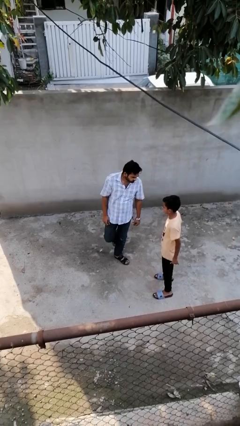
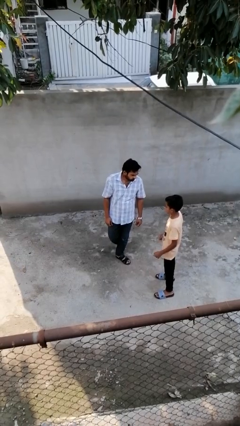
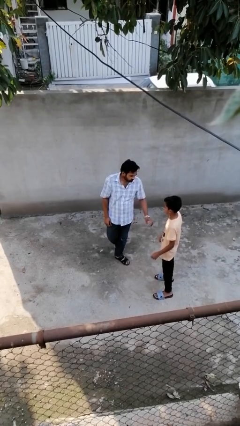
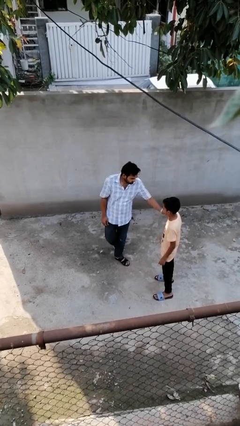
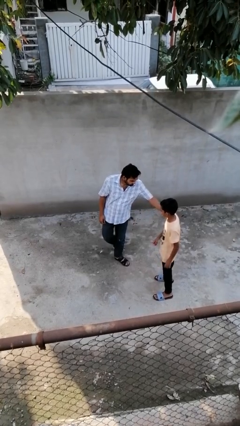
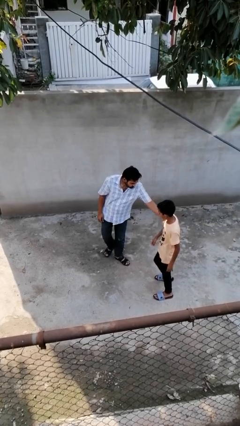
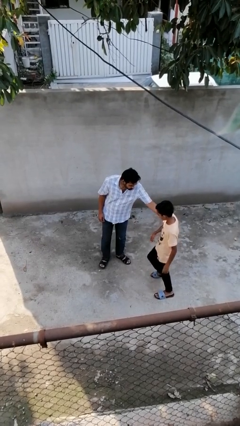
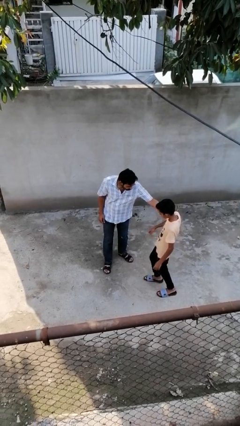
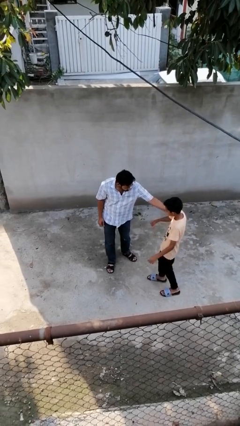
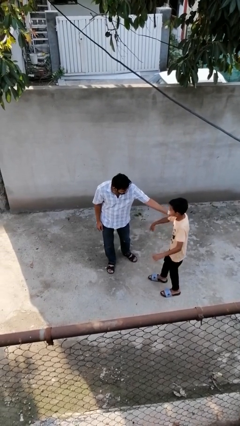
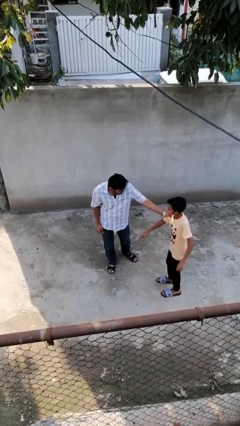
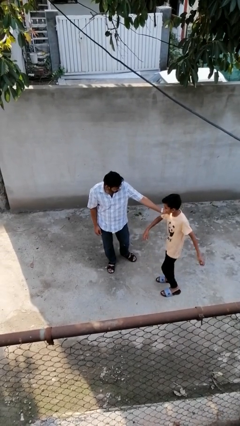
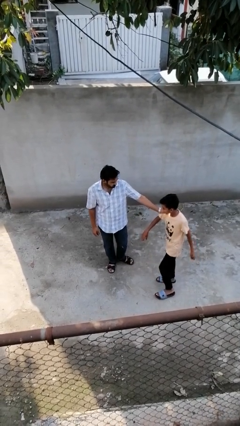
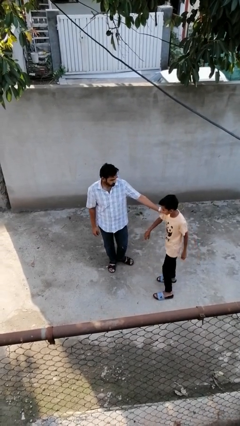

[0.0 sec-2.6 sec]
person grabs person by bicep

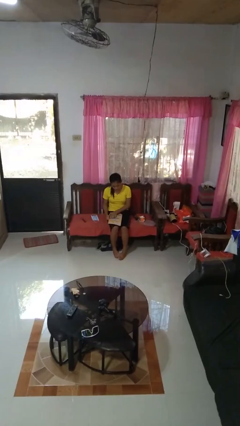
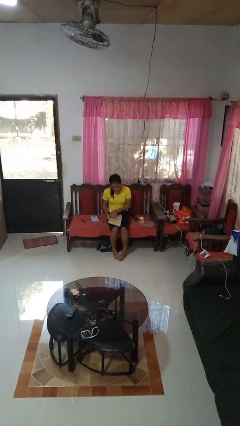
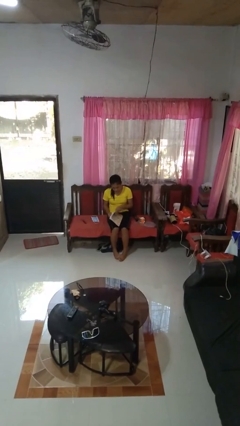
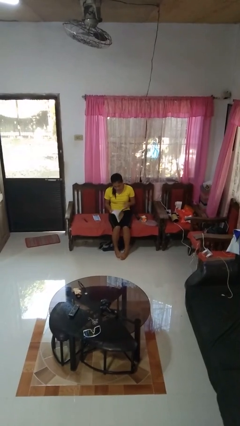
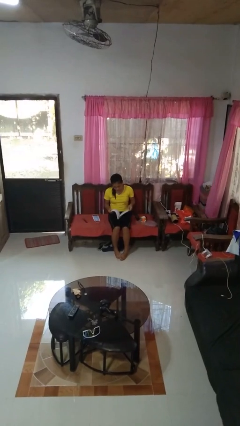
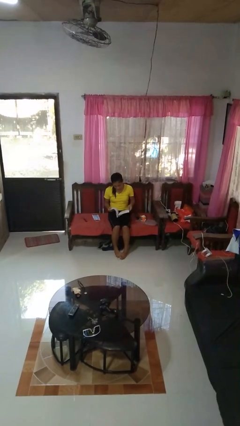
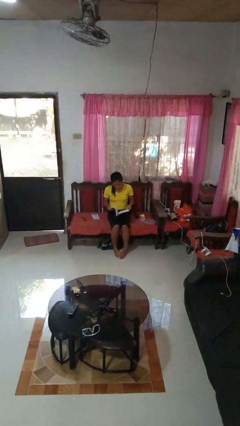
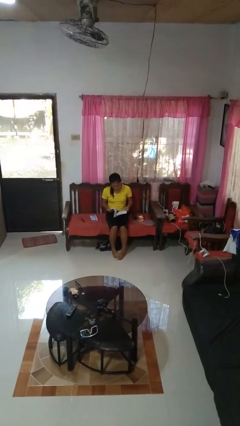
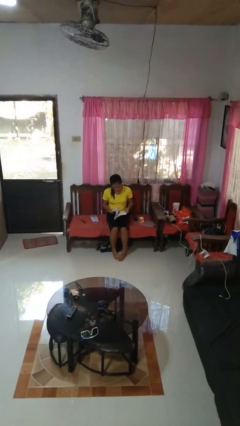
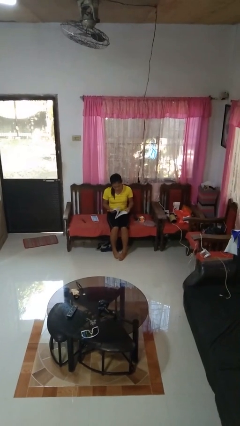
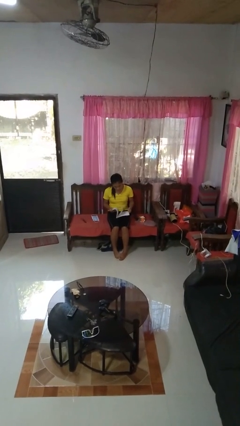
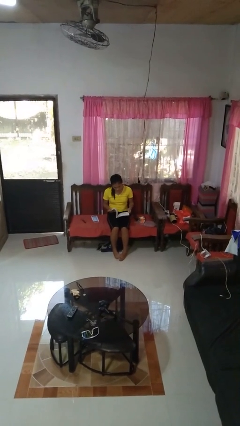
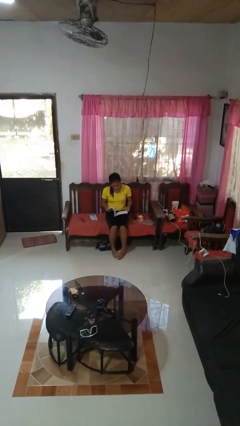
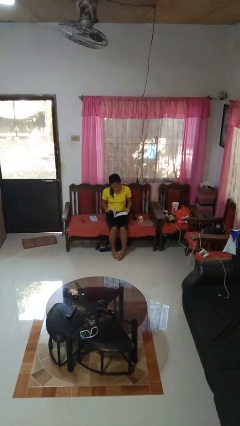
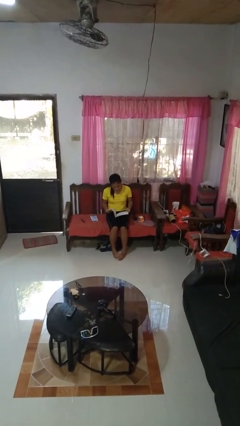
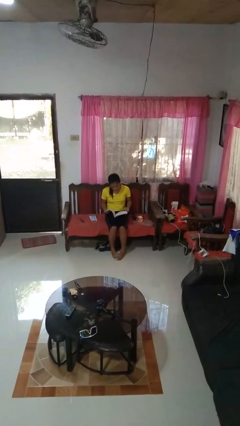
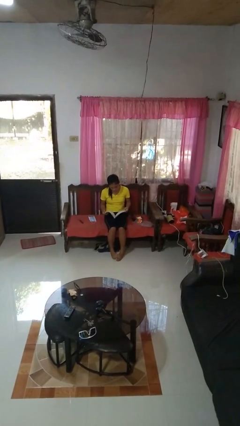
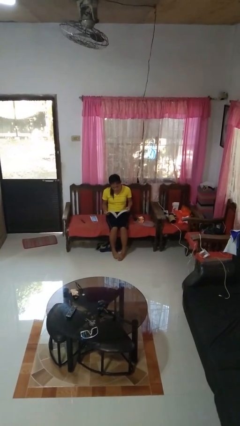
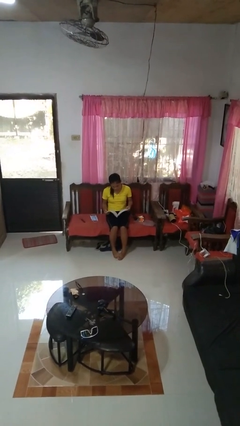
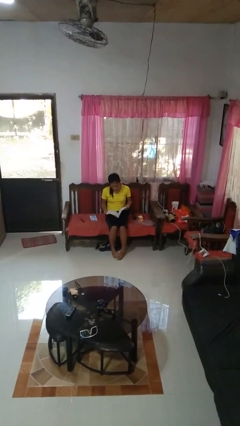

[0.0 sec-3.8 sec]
person reads book

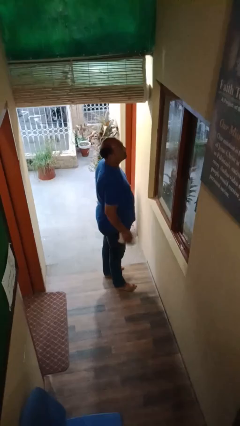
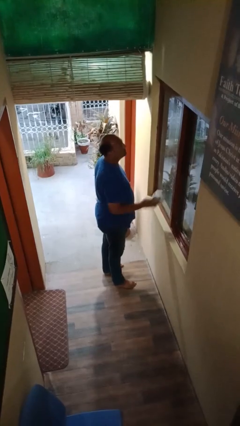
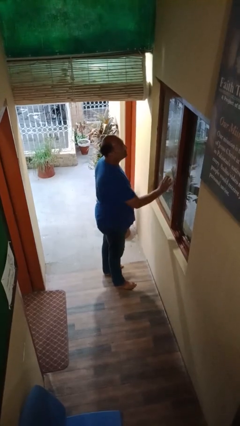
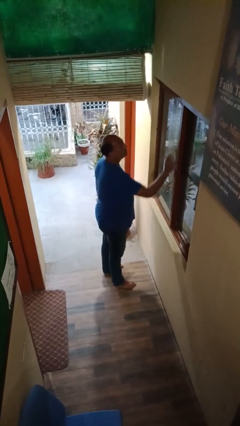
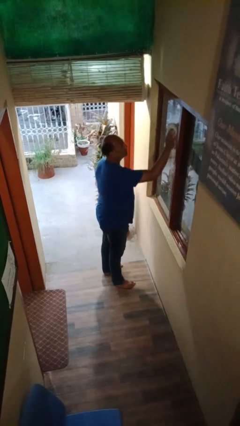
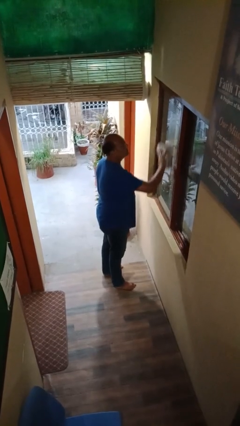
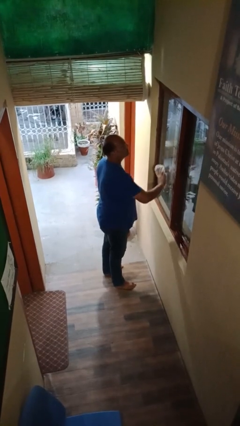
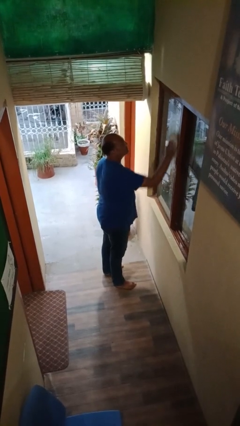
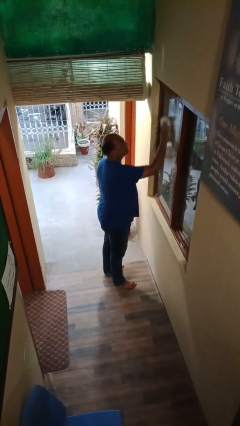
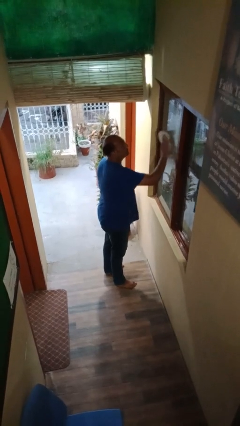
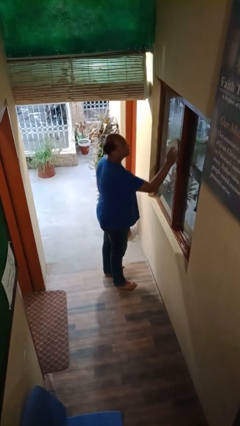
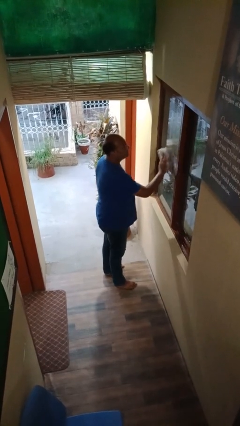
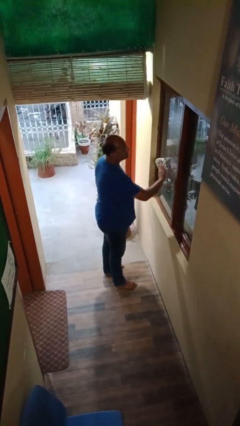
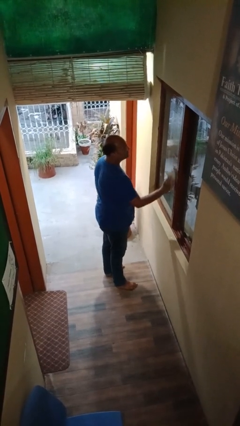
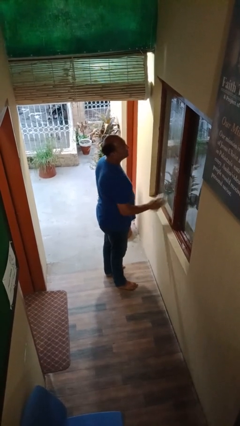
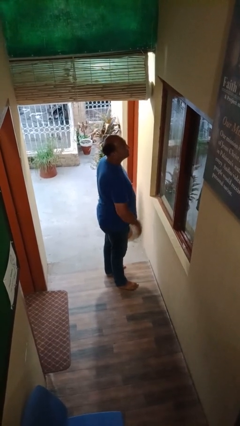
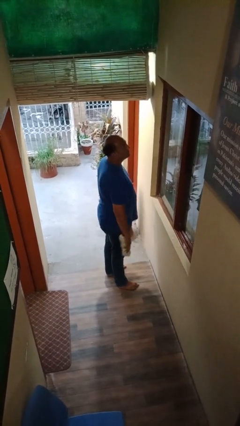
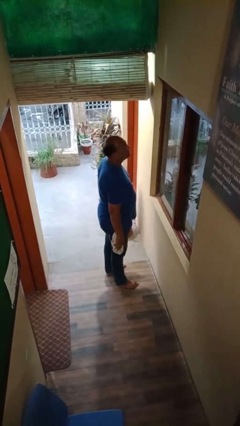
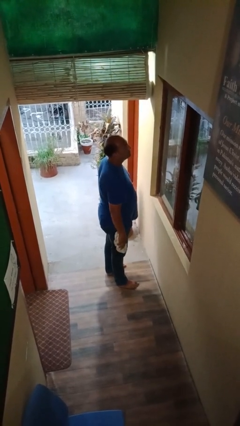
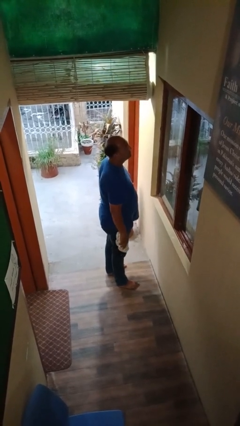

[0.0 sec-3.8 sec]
person washes window

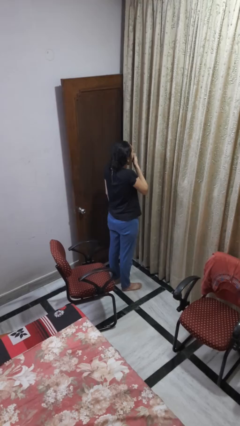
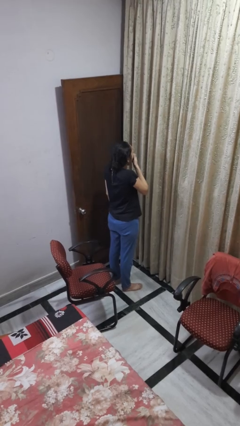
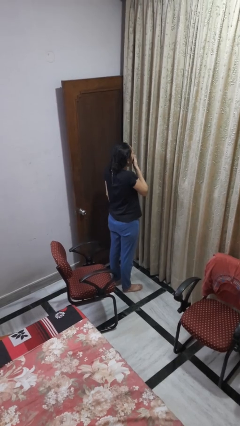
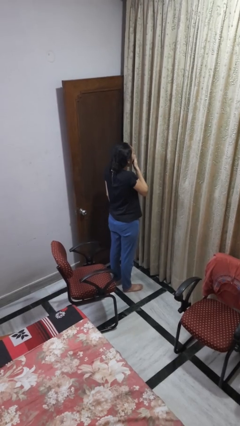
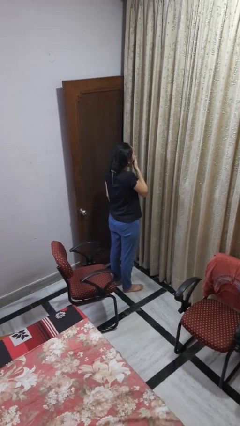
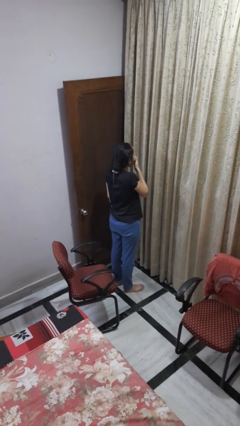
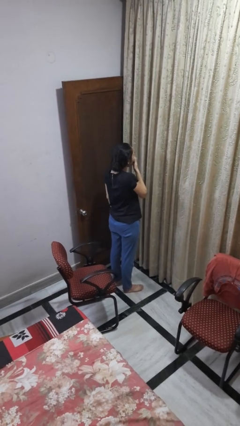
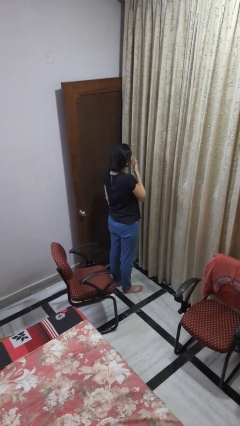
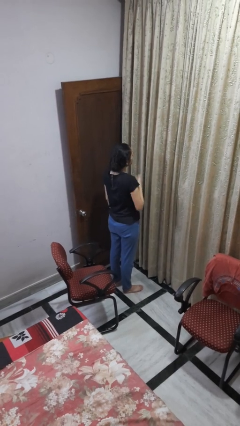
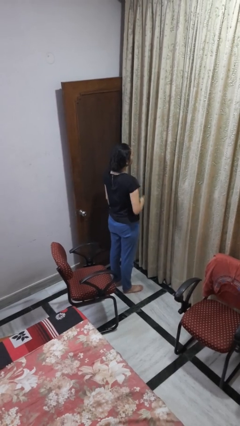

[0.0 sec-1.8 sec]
person yawns

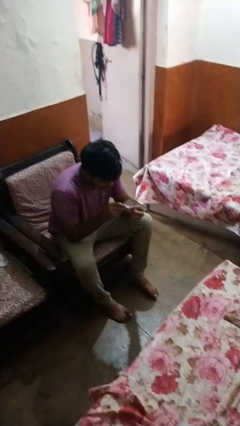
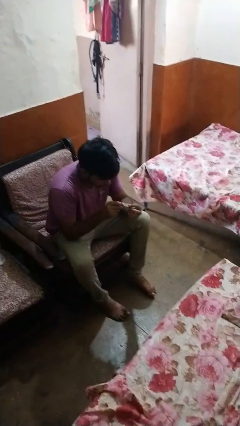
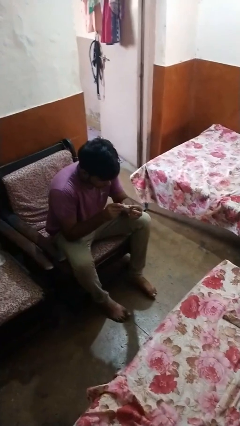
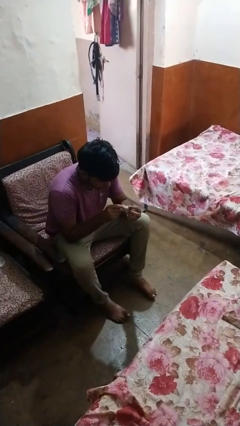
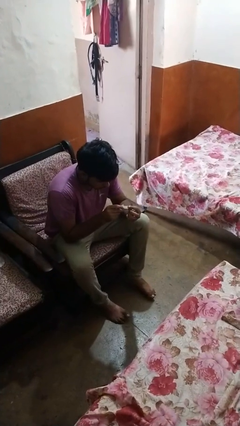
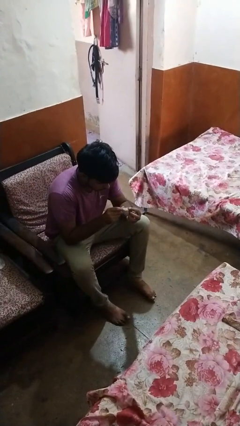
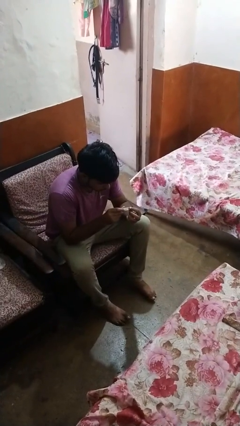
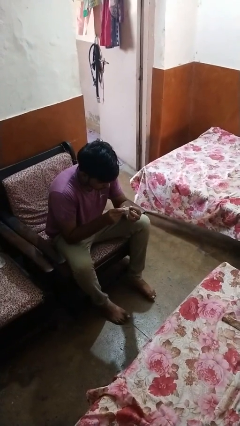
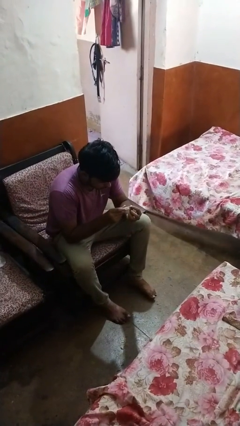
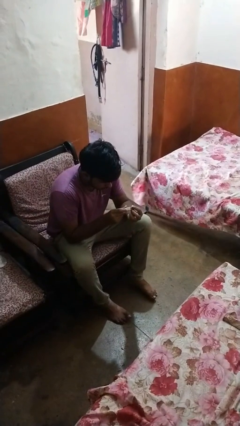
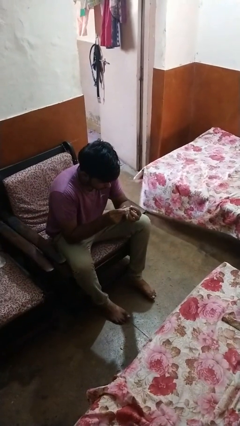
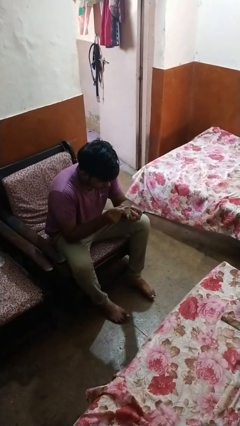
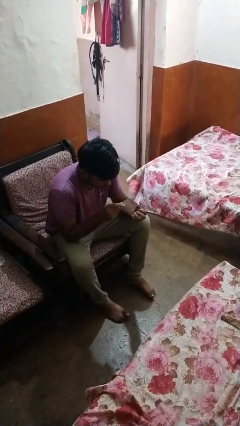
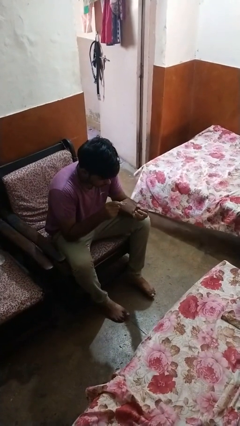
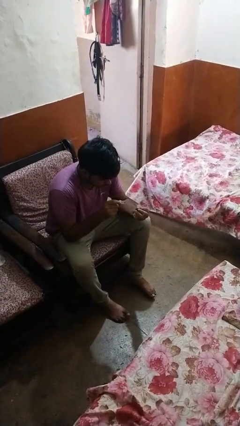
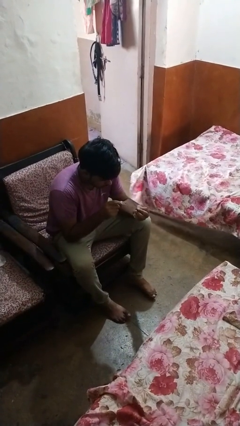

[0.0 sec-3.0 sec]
person clips fingernails

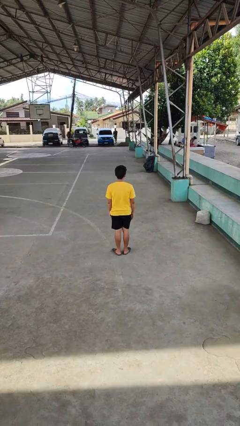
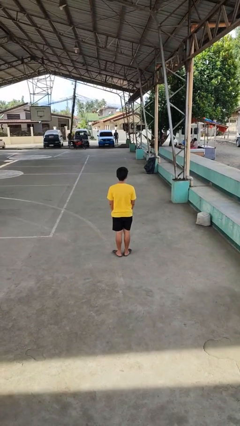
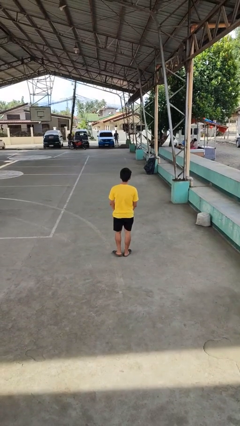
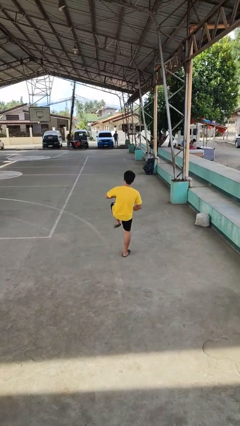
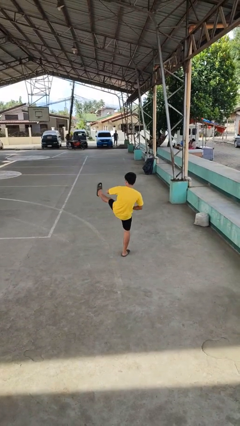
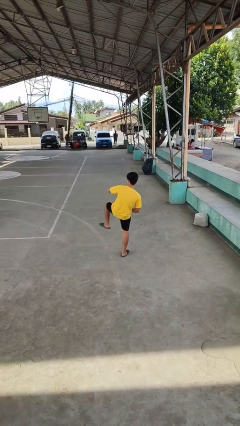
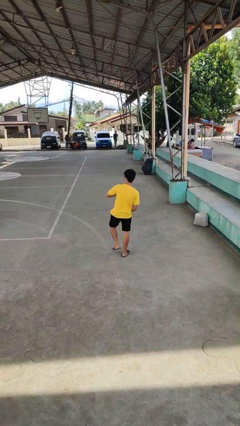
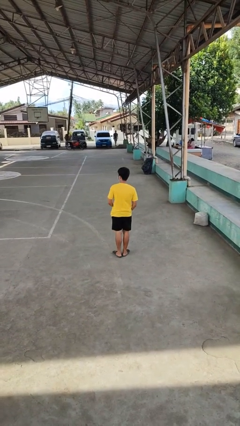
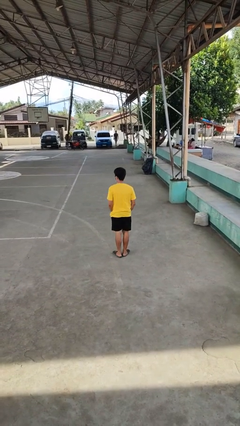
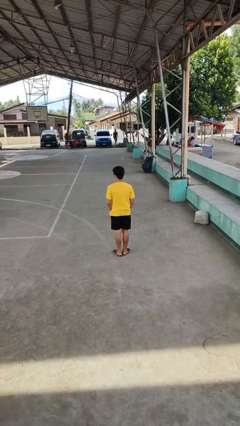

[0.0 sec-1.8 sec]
person karate kicks

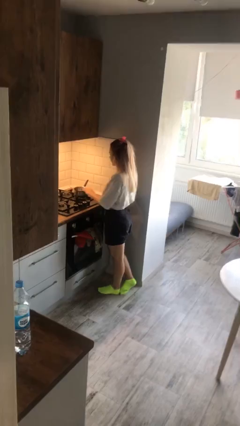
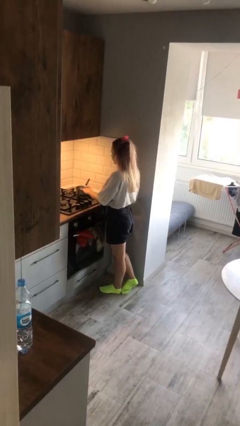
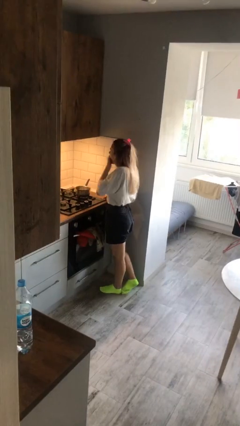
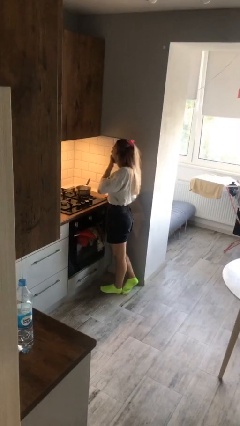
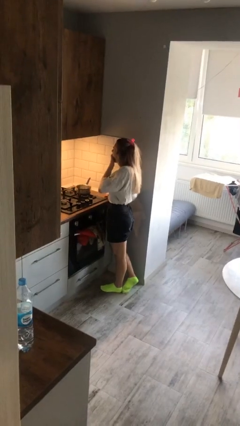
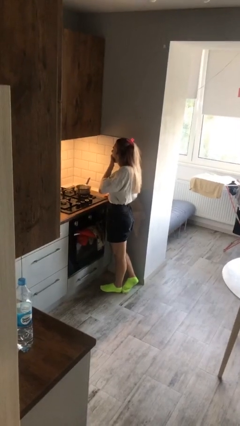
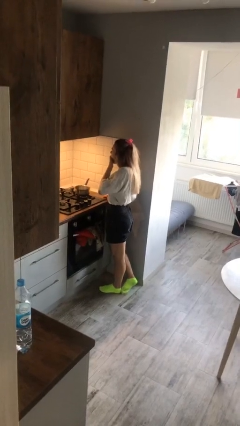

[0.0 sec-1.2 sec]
person burns hand
